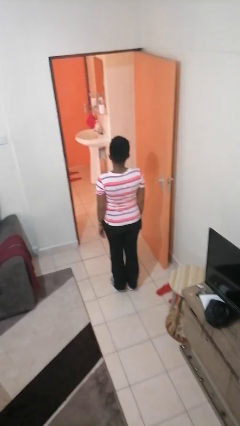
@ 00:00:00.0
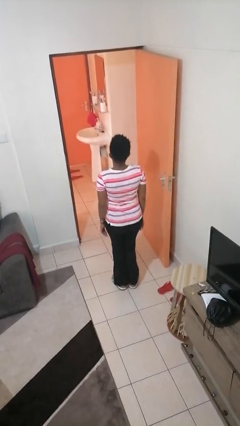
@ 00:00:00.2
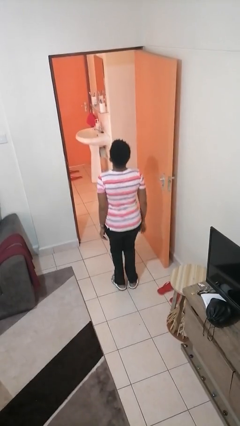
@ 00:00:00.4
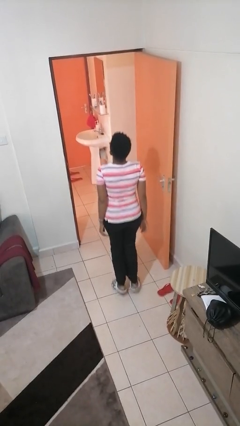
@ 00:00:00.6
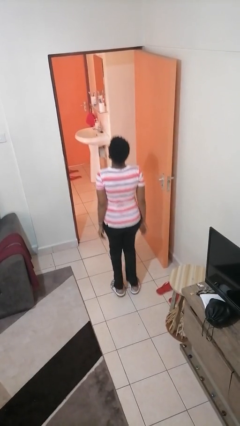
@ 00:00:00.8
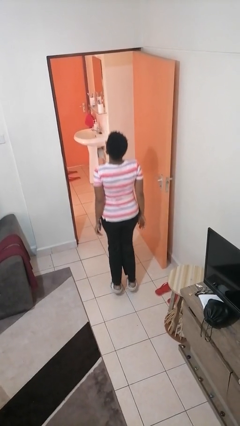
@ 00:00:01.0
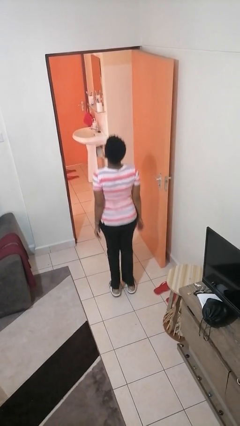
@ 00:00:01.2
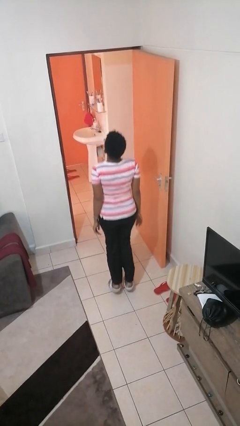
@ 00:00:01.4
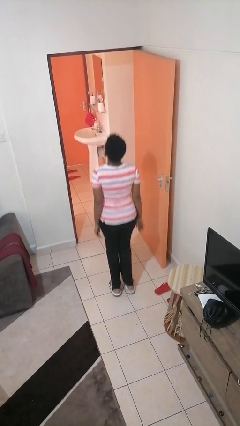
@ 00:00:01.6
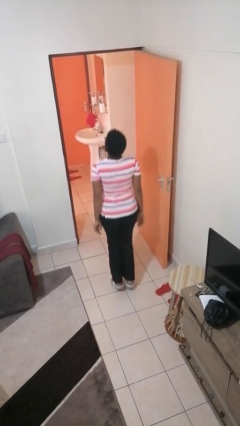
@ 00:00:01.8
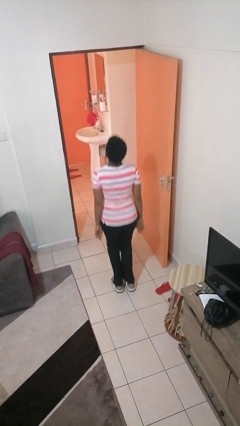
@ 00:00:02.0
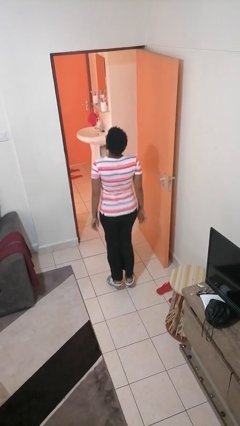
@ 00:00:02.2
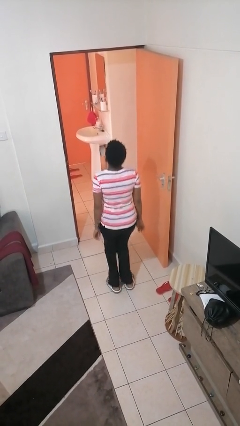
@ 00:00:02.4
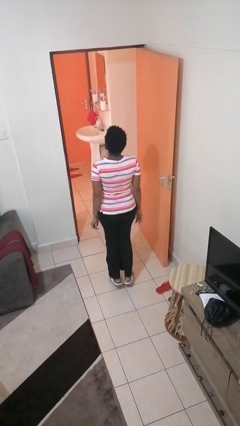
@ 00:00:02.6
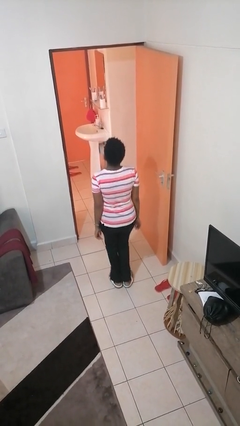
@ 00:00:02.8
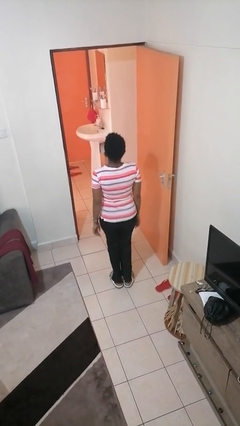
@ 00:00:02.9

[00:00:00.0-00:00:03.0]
person jumps

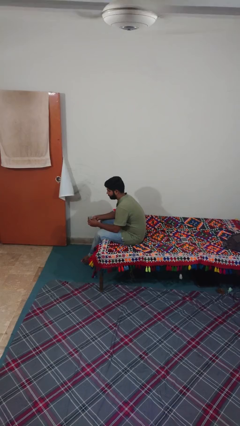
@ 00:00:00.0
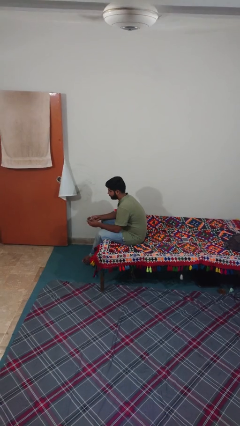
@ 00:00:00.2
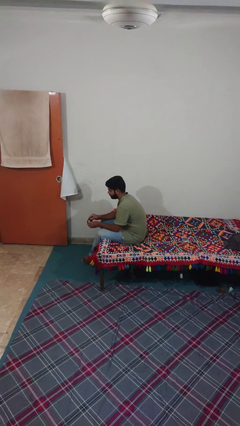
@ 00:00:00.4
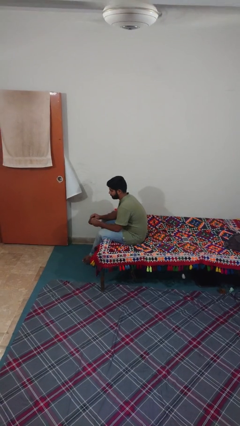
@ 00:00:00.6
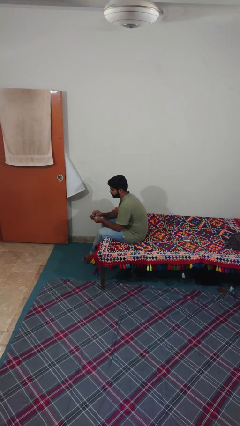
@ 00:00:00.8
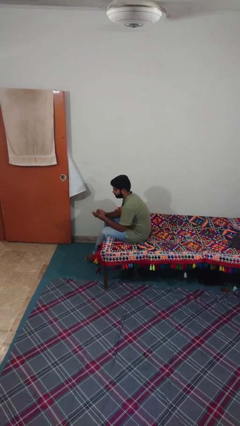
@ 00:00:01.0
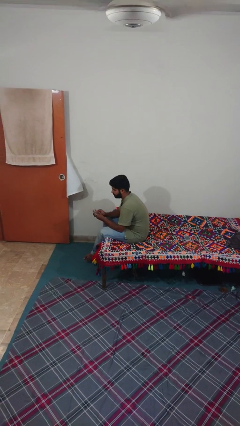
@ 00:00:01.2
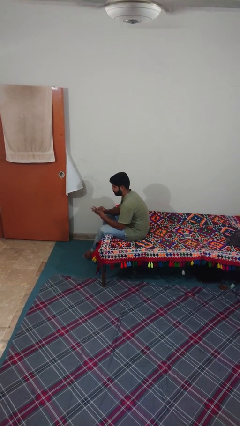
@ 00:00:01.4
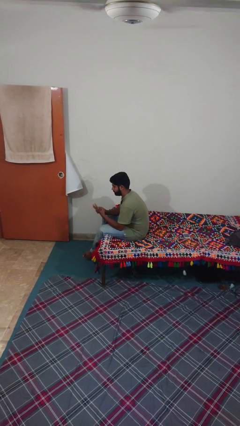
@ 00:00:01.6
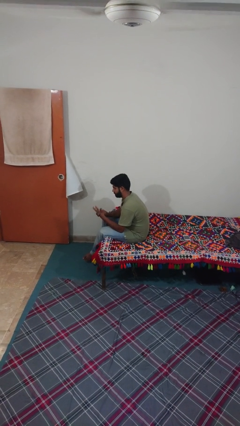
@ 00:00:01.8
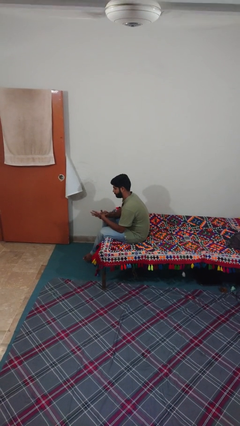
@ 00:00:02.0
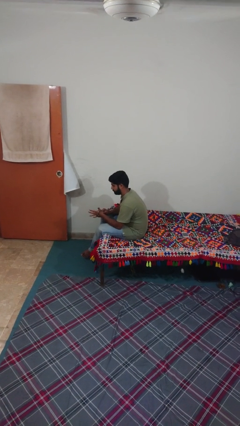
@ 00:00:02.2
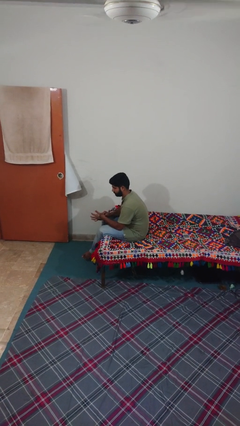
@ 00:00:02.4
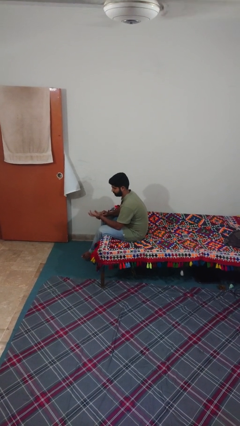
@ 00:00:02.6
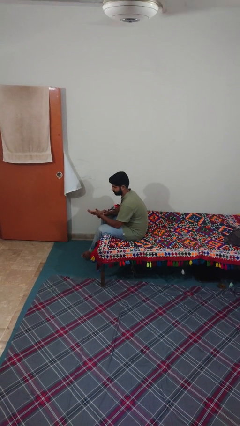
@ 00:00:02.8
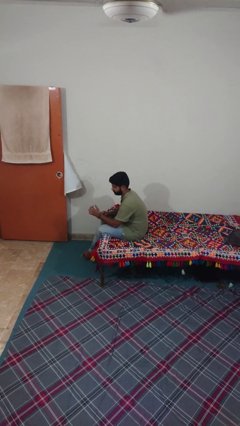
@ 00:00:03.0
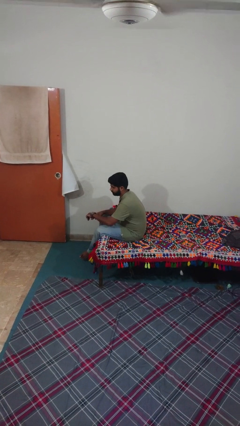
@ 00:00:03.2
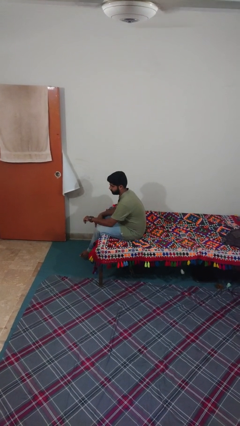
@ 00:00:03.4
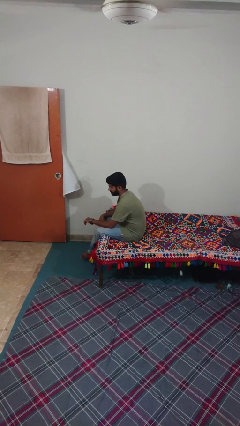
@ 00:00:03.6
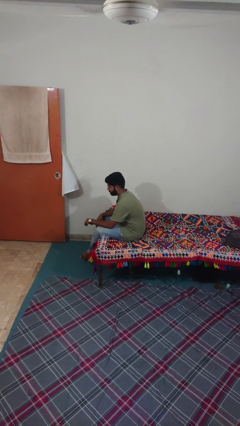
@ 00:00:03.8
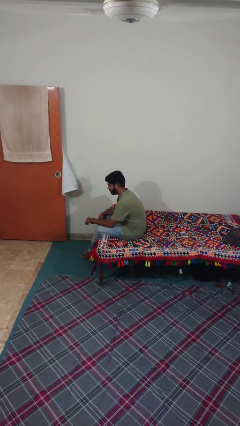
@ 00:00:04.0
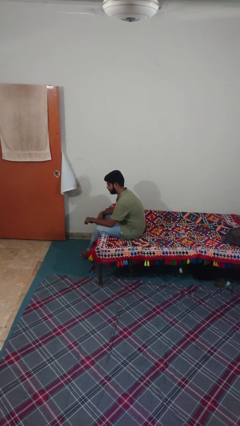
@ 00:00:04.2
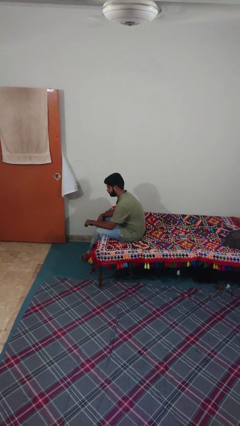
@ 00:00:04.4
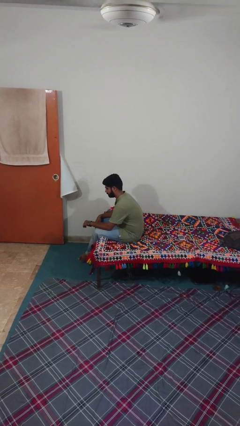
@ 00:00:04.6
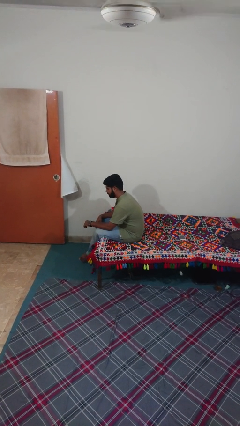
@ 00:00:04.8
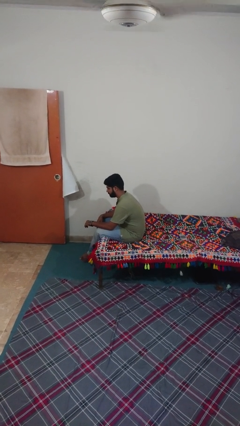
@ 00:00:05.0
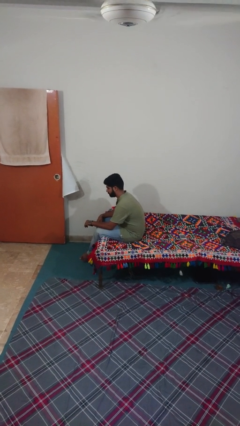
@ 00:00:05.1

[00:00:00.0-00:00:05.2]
person puts on wristwatch

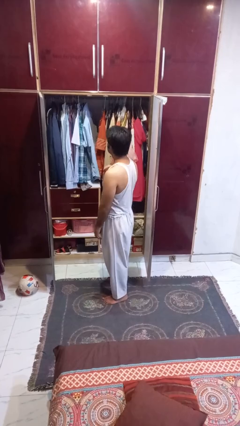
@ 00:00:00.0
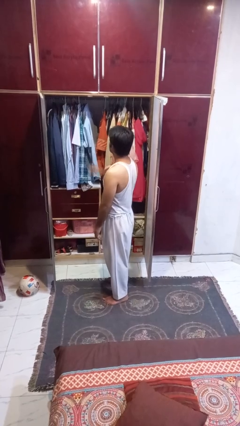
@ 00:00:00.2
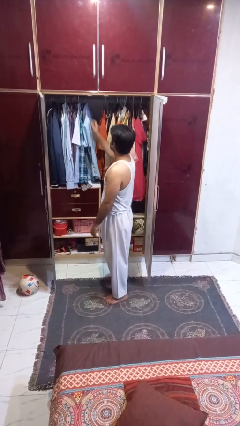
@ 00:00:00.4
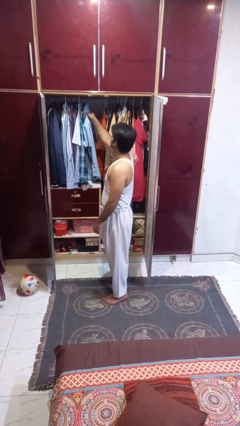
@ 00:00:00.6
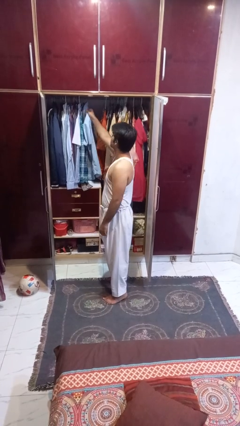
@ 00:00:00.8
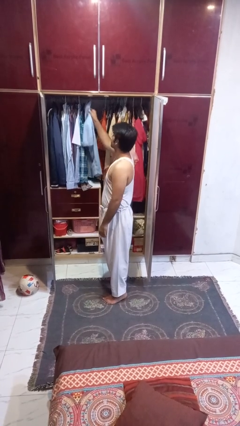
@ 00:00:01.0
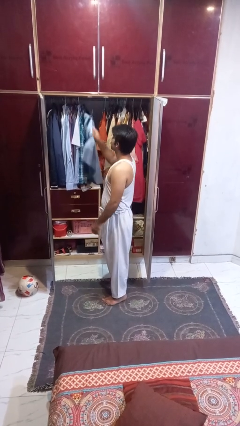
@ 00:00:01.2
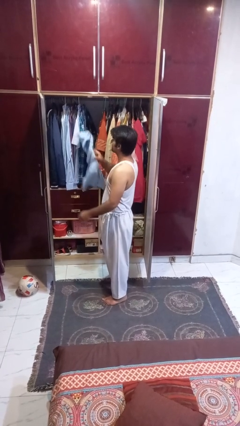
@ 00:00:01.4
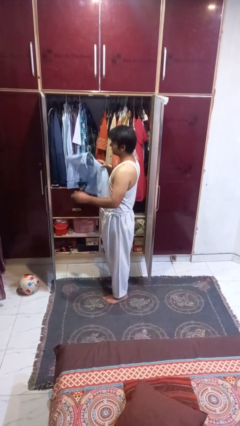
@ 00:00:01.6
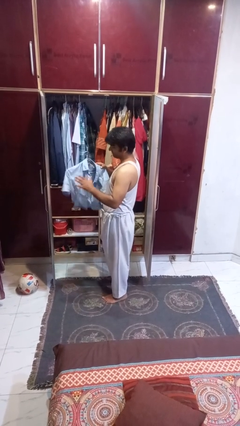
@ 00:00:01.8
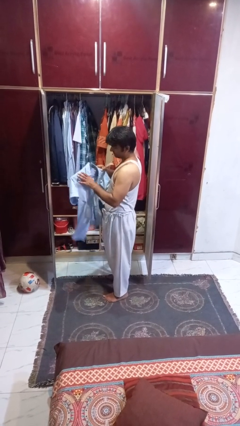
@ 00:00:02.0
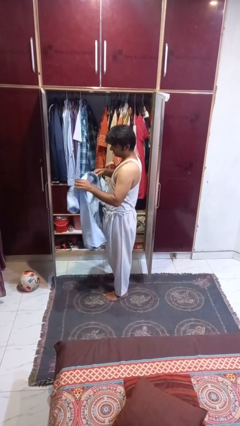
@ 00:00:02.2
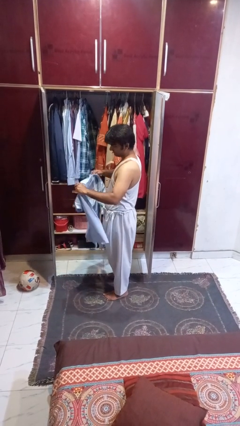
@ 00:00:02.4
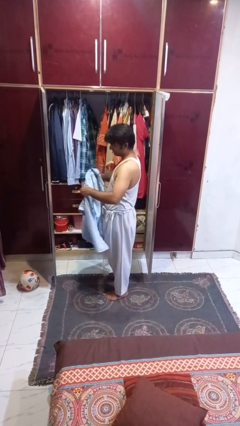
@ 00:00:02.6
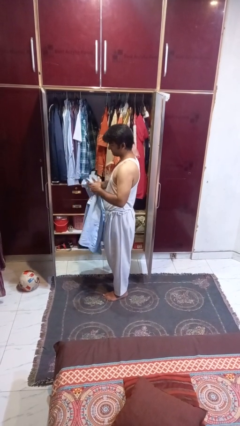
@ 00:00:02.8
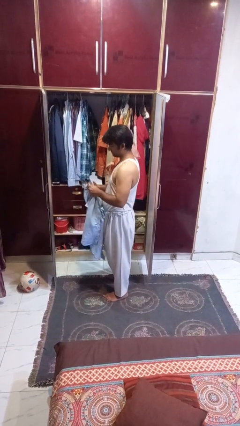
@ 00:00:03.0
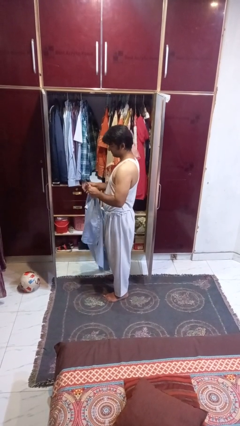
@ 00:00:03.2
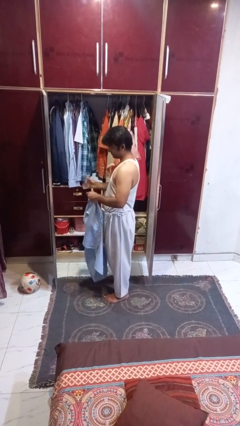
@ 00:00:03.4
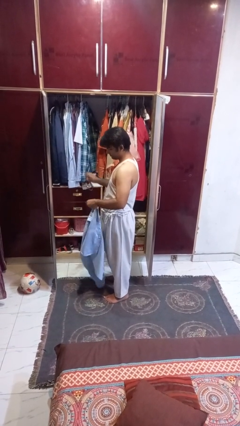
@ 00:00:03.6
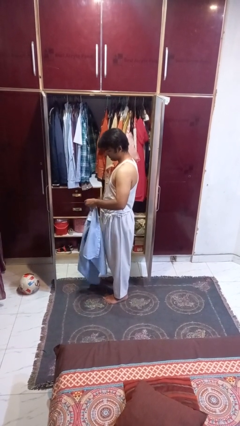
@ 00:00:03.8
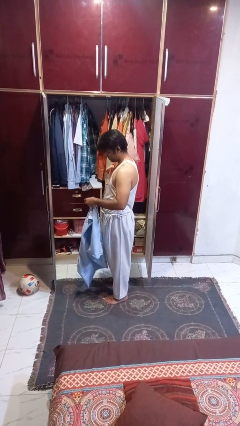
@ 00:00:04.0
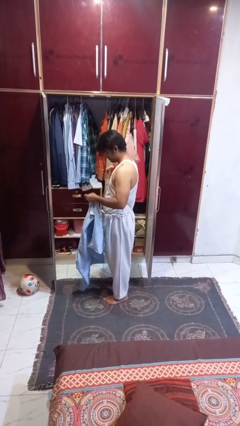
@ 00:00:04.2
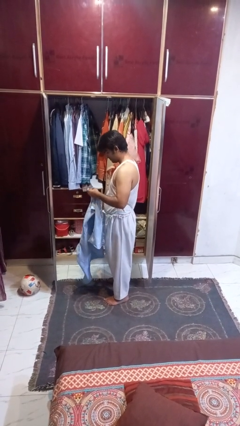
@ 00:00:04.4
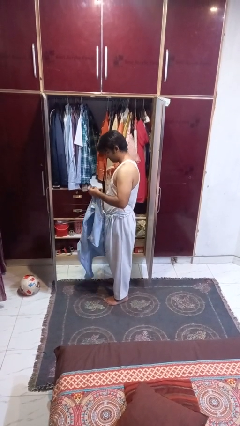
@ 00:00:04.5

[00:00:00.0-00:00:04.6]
person takes clothes from closet

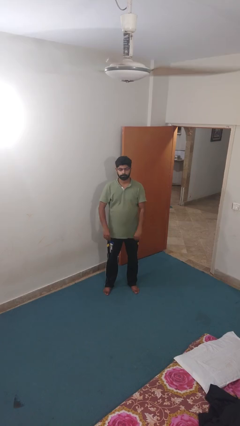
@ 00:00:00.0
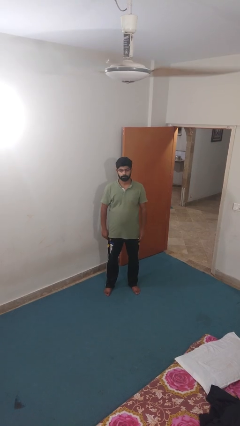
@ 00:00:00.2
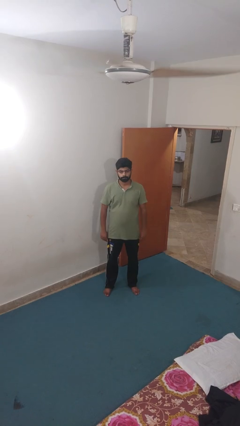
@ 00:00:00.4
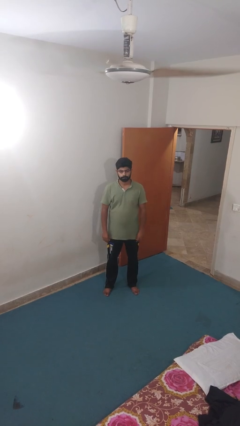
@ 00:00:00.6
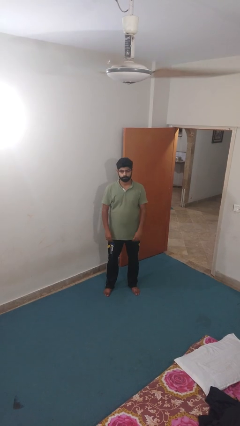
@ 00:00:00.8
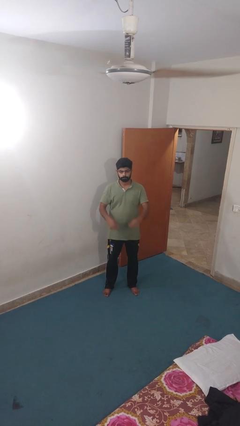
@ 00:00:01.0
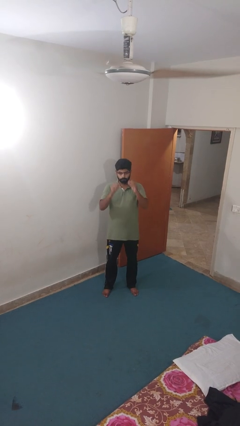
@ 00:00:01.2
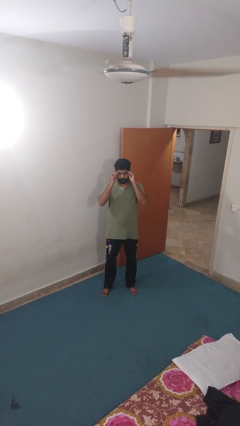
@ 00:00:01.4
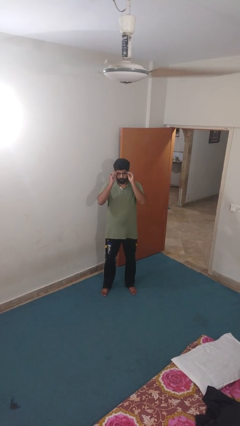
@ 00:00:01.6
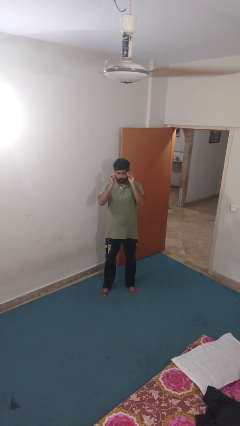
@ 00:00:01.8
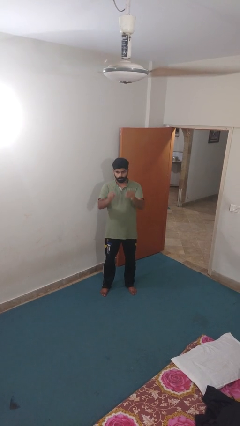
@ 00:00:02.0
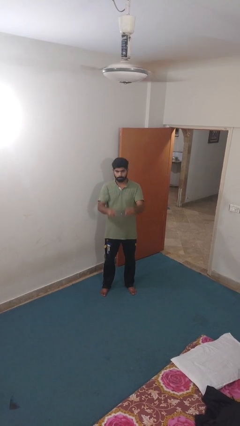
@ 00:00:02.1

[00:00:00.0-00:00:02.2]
person takes off glasses

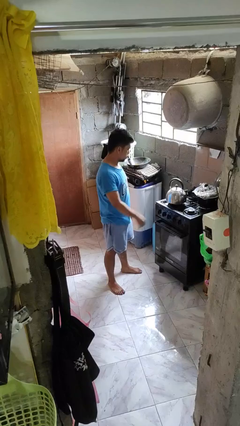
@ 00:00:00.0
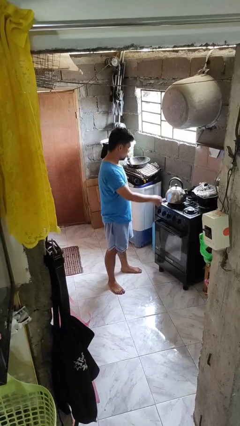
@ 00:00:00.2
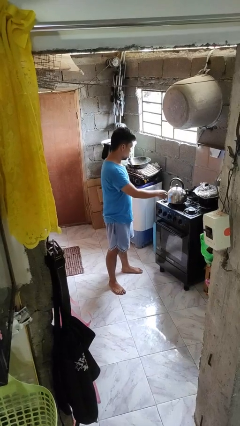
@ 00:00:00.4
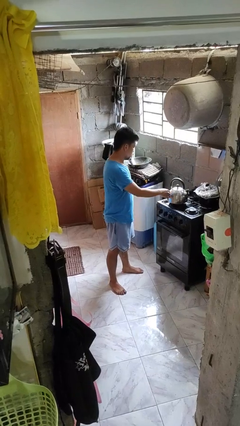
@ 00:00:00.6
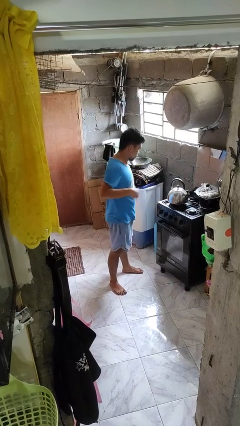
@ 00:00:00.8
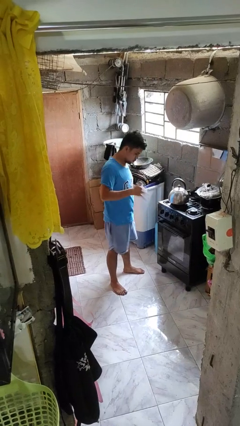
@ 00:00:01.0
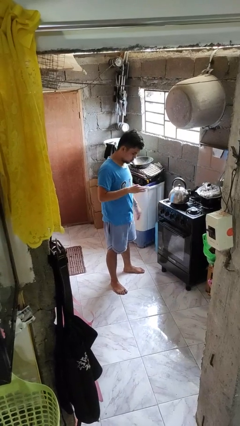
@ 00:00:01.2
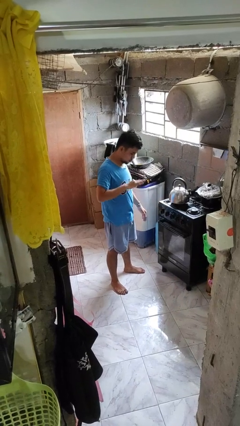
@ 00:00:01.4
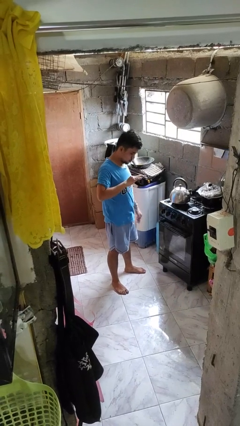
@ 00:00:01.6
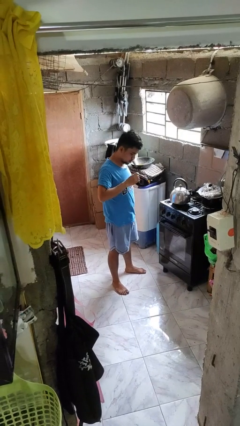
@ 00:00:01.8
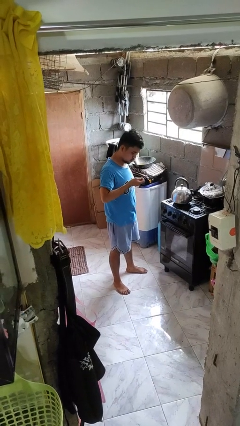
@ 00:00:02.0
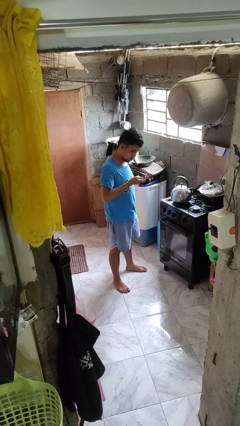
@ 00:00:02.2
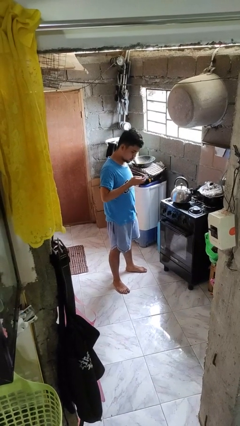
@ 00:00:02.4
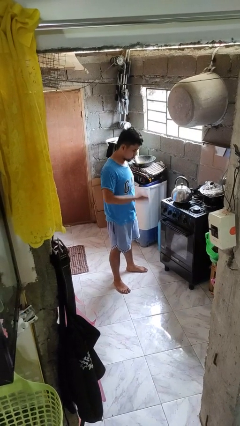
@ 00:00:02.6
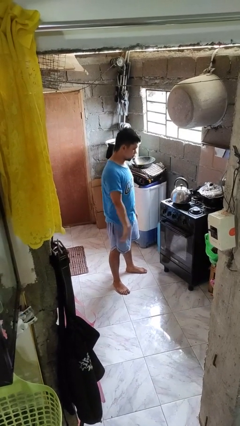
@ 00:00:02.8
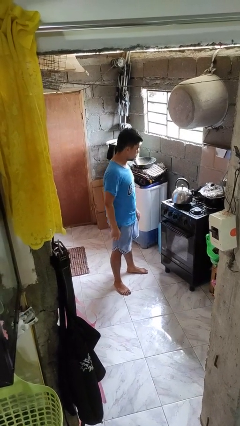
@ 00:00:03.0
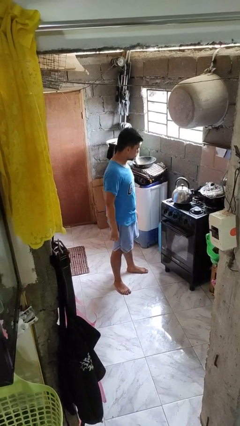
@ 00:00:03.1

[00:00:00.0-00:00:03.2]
person burns hand
